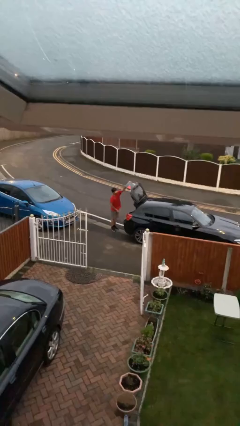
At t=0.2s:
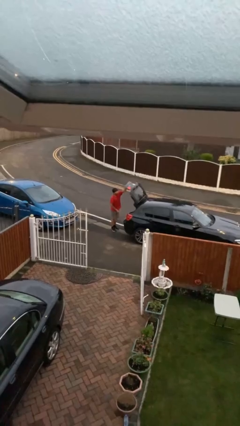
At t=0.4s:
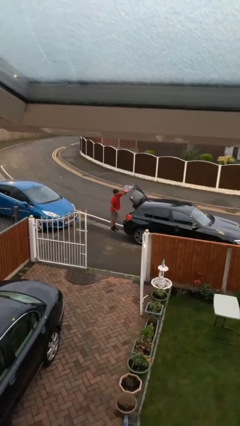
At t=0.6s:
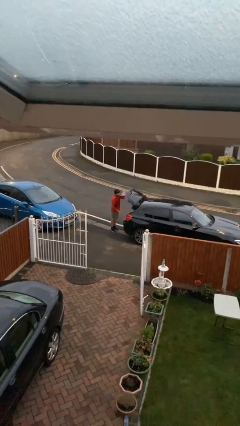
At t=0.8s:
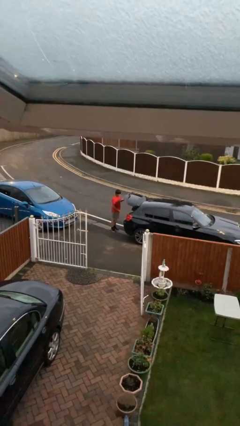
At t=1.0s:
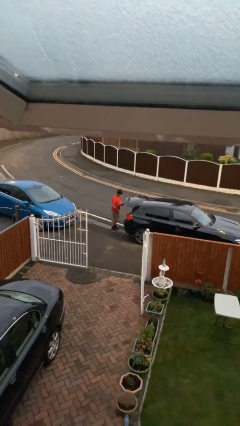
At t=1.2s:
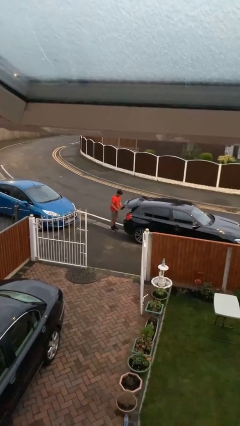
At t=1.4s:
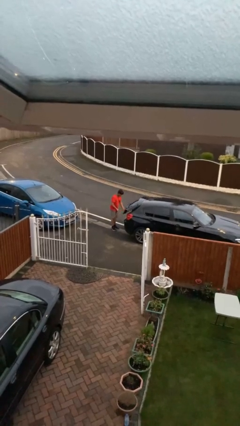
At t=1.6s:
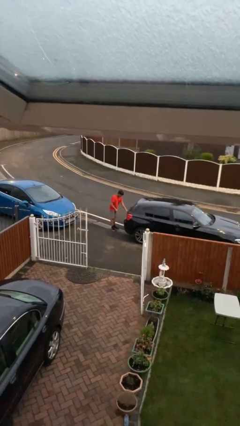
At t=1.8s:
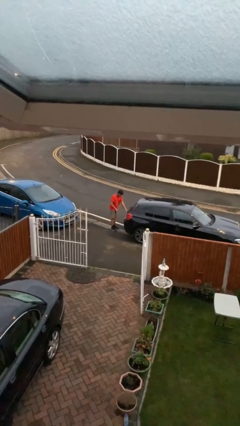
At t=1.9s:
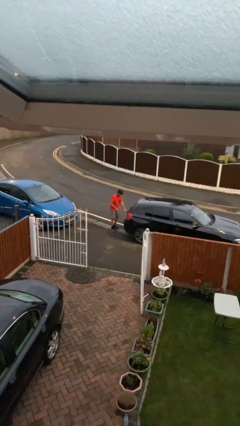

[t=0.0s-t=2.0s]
person closes car trunk

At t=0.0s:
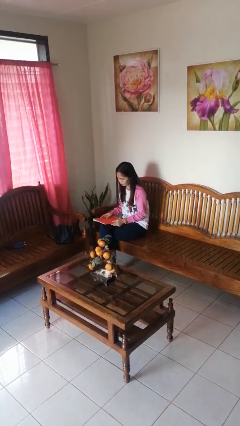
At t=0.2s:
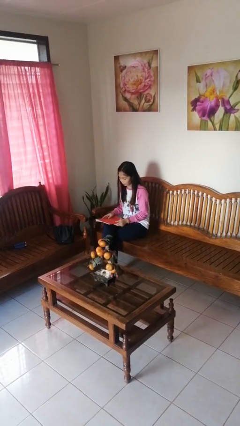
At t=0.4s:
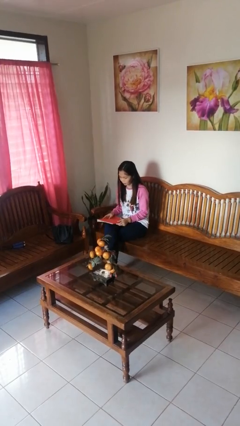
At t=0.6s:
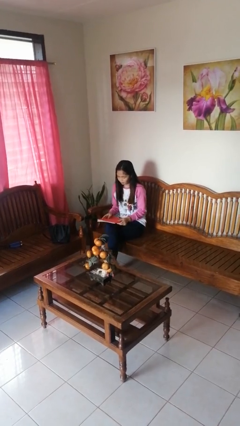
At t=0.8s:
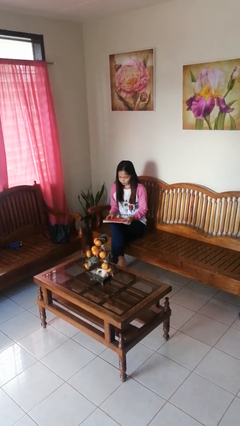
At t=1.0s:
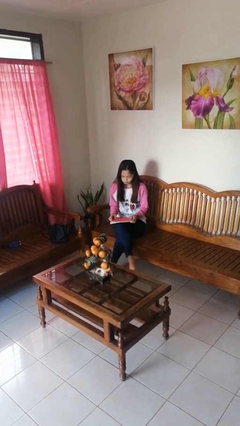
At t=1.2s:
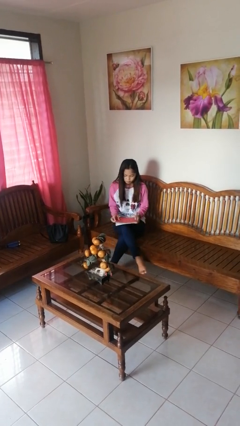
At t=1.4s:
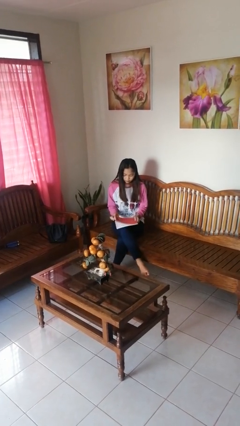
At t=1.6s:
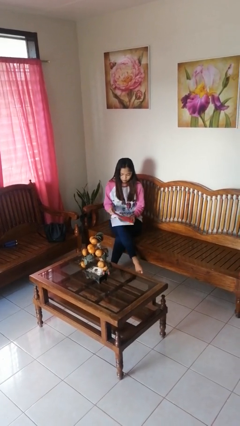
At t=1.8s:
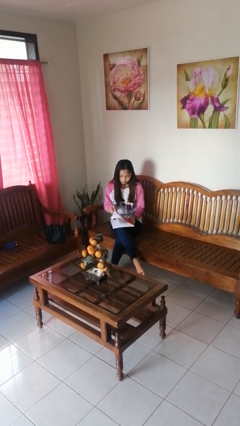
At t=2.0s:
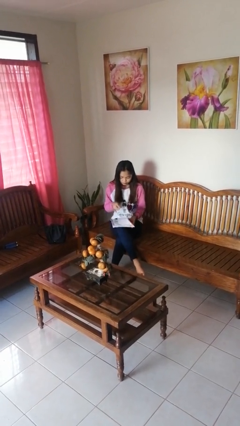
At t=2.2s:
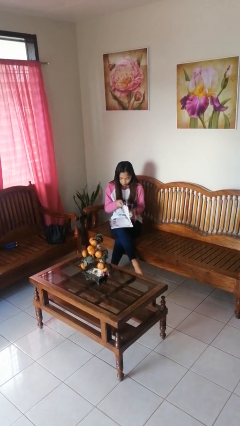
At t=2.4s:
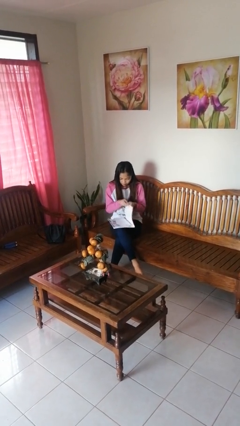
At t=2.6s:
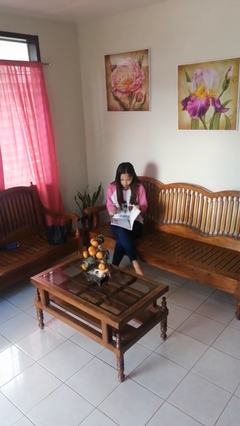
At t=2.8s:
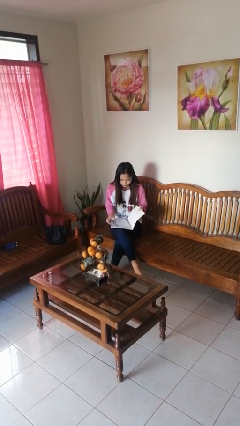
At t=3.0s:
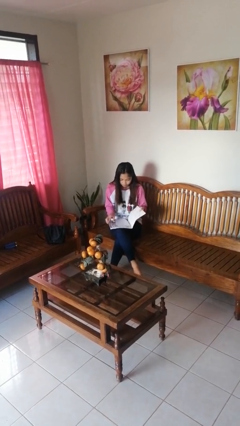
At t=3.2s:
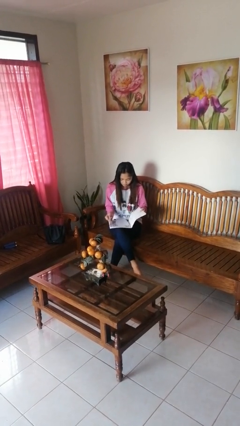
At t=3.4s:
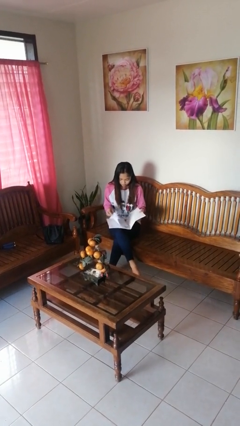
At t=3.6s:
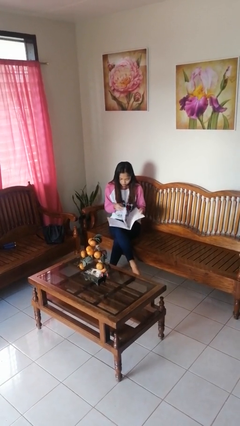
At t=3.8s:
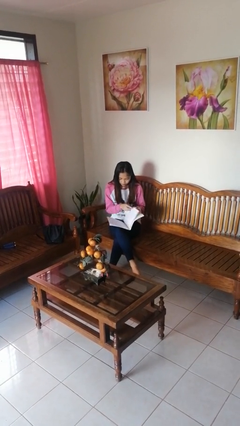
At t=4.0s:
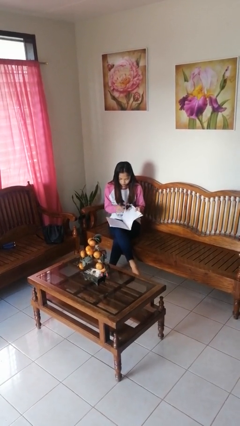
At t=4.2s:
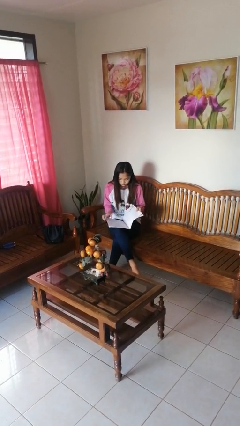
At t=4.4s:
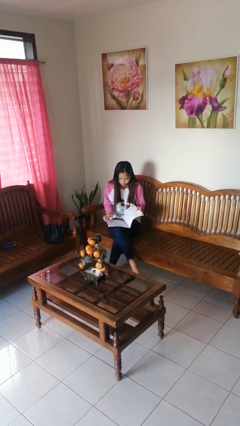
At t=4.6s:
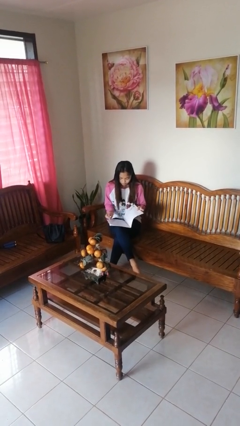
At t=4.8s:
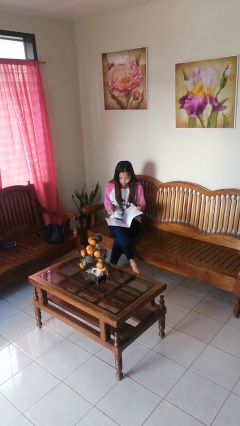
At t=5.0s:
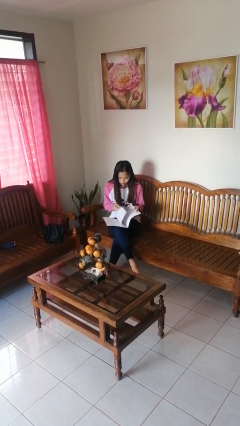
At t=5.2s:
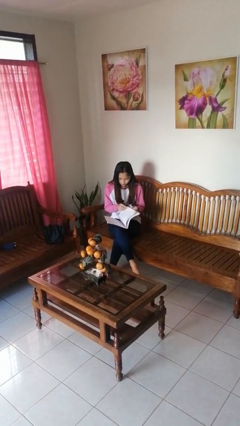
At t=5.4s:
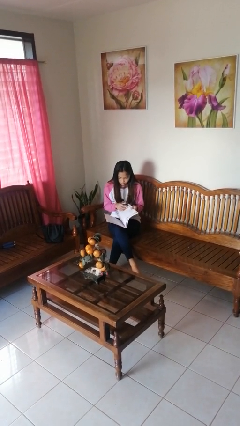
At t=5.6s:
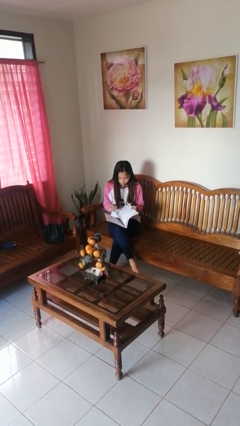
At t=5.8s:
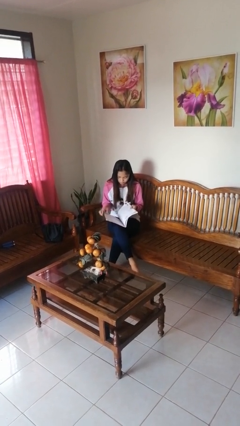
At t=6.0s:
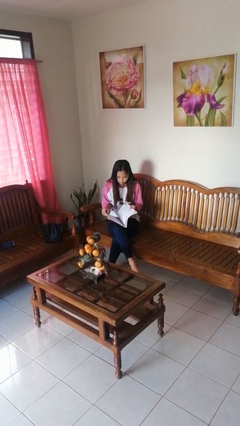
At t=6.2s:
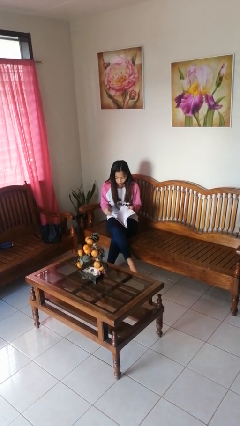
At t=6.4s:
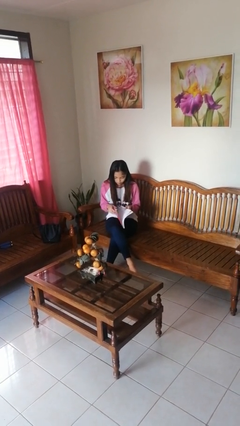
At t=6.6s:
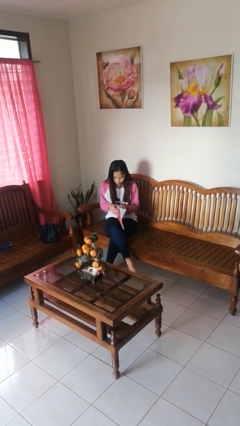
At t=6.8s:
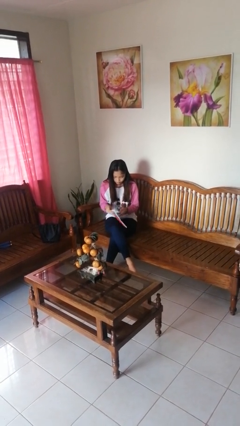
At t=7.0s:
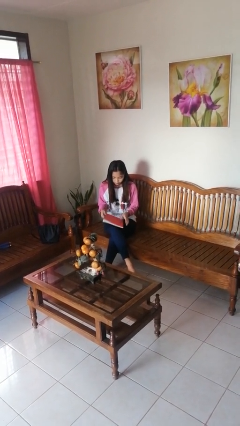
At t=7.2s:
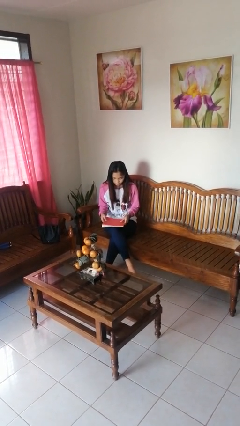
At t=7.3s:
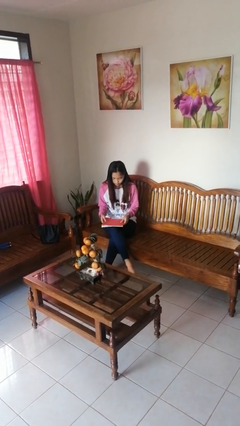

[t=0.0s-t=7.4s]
person reads magazine

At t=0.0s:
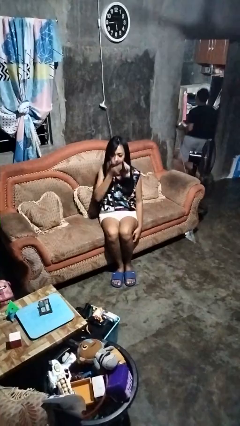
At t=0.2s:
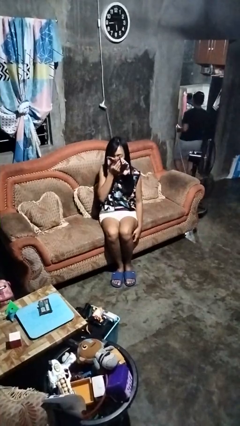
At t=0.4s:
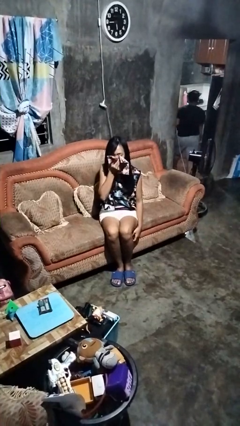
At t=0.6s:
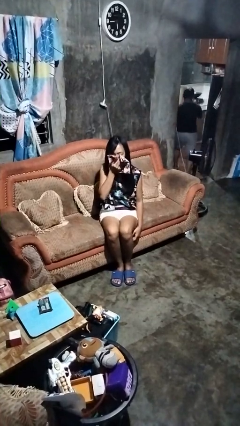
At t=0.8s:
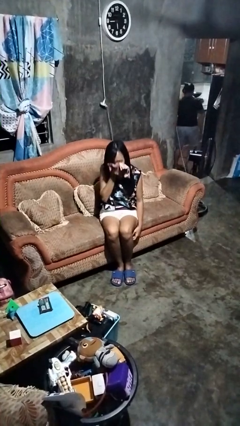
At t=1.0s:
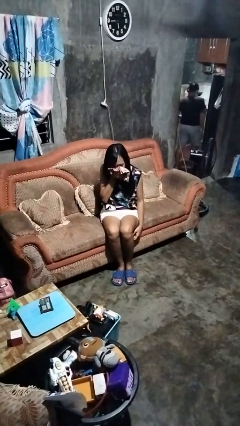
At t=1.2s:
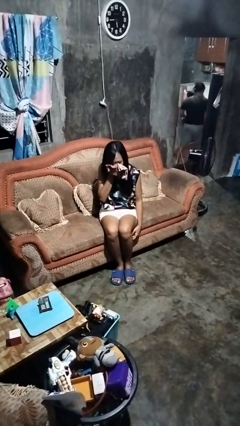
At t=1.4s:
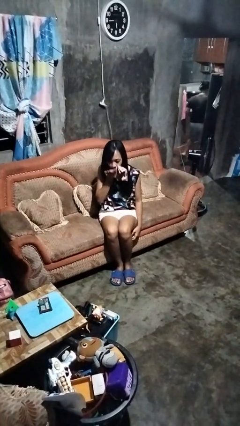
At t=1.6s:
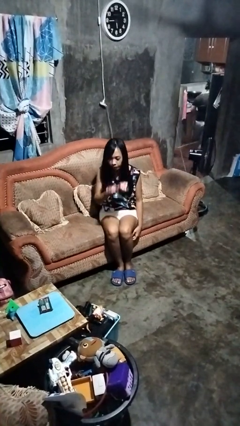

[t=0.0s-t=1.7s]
person blows nose

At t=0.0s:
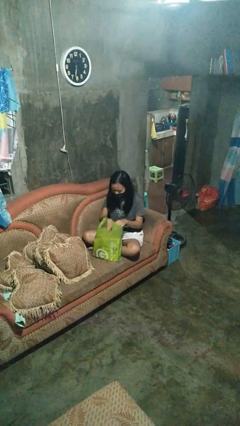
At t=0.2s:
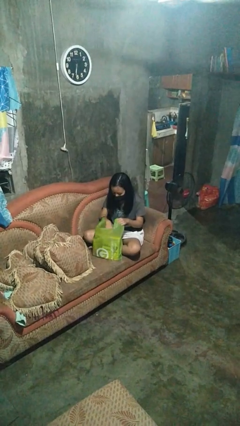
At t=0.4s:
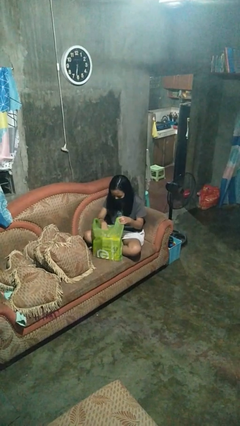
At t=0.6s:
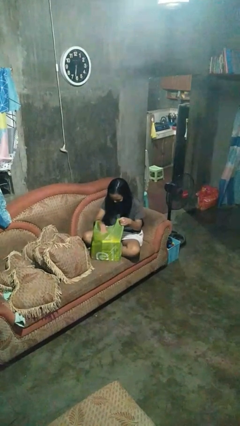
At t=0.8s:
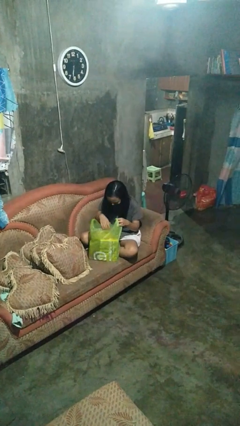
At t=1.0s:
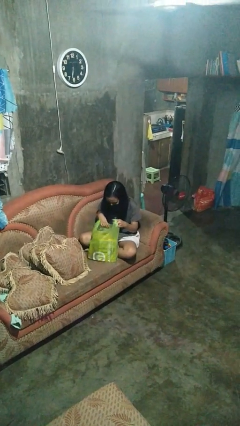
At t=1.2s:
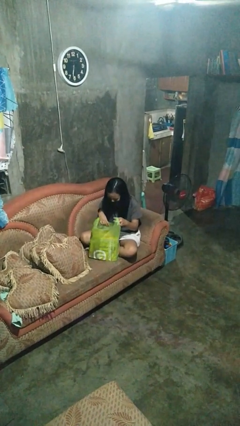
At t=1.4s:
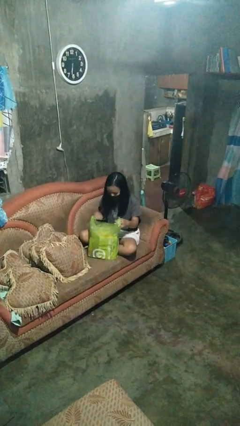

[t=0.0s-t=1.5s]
person searches in bag

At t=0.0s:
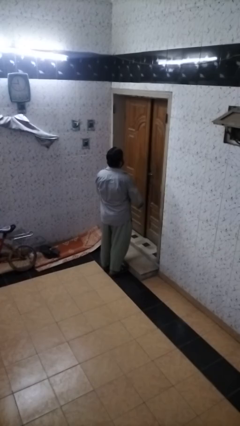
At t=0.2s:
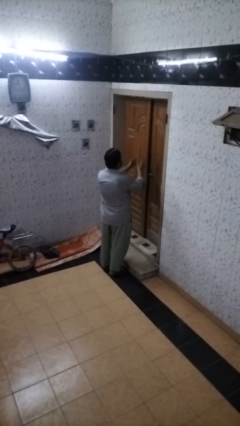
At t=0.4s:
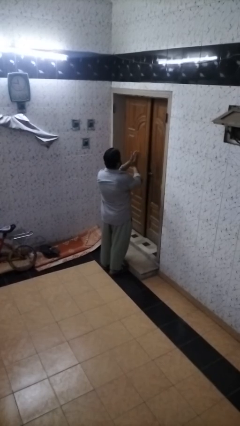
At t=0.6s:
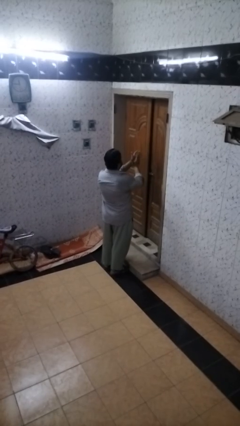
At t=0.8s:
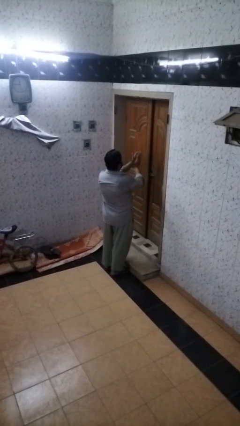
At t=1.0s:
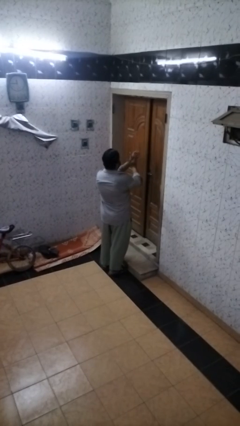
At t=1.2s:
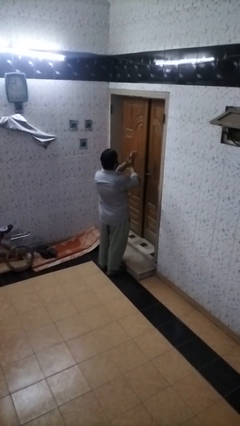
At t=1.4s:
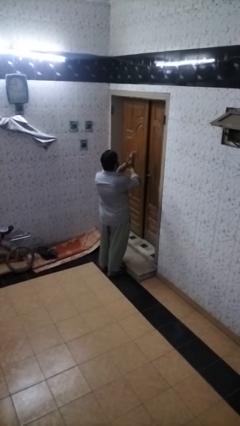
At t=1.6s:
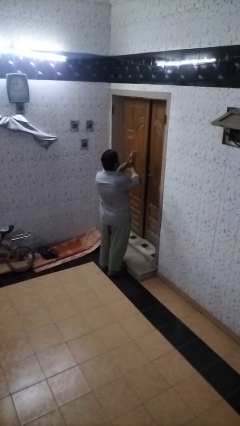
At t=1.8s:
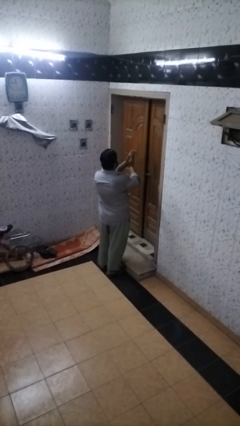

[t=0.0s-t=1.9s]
person claps hands

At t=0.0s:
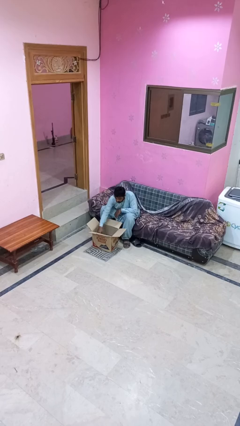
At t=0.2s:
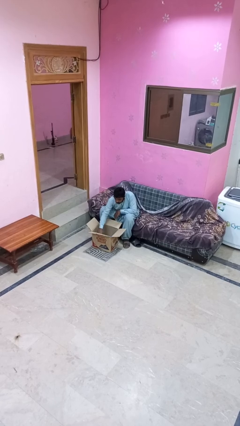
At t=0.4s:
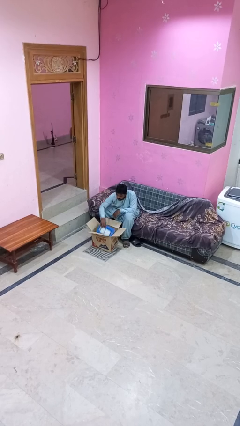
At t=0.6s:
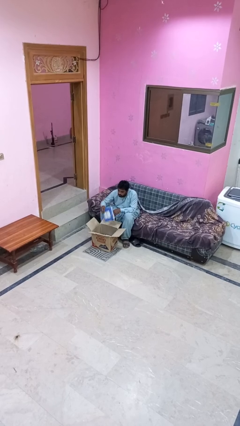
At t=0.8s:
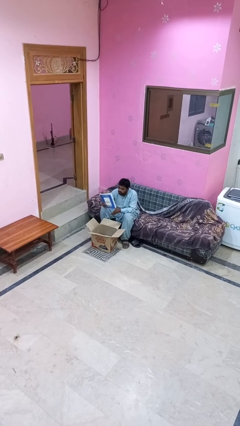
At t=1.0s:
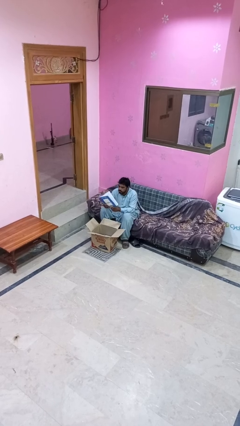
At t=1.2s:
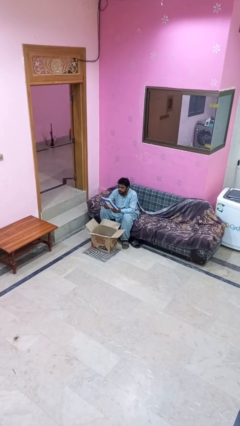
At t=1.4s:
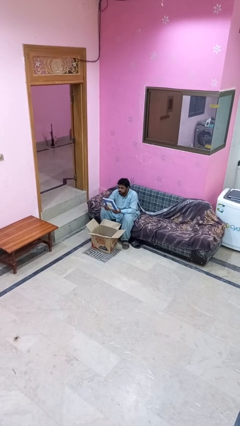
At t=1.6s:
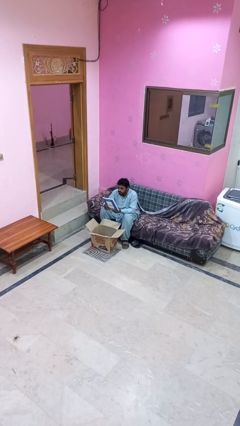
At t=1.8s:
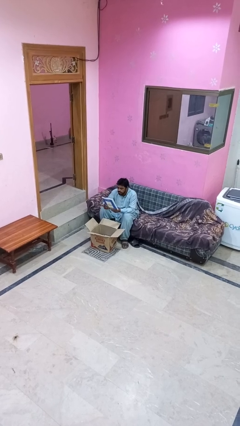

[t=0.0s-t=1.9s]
person takes object from box

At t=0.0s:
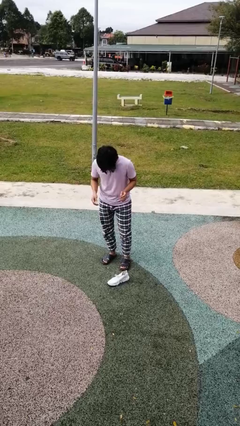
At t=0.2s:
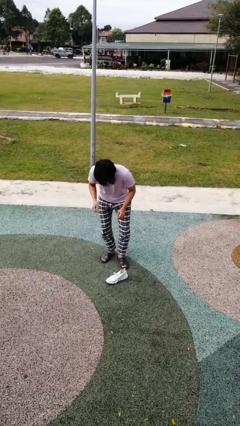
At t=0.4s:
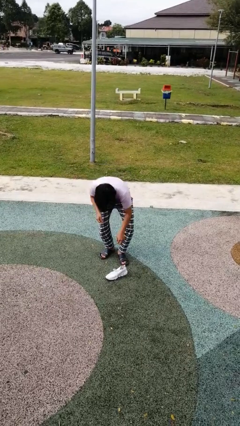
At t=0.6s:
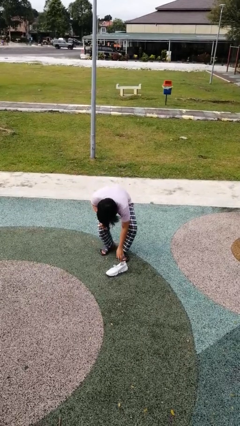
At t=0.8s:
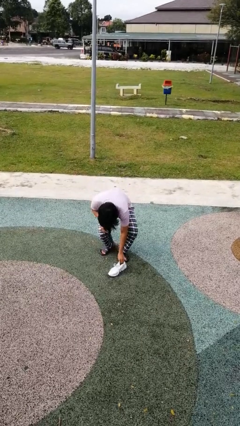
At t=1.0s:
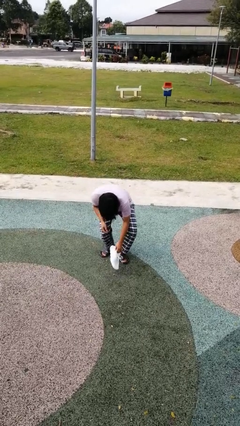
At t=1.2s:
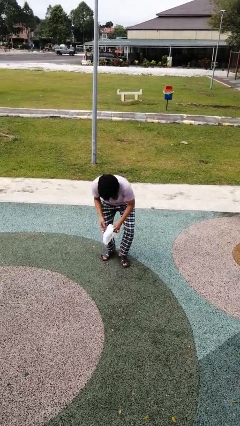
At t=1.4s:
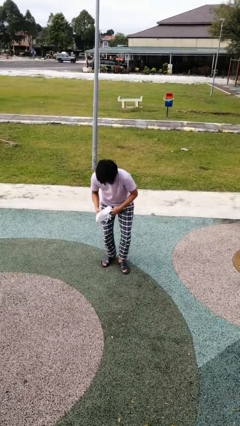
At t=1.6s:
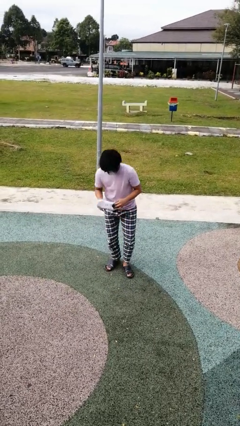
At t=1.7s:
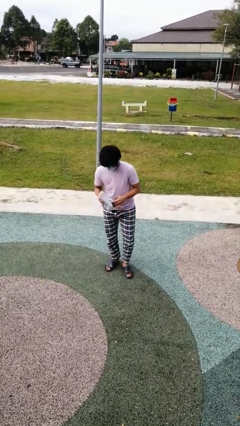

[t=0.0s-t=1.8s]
person picks up object from floor
